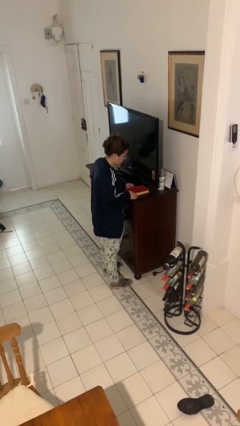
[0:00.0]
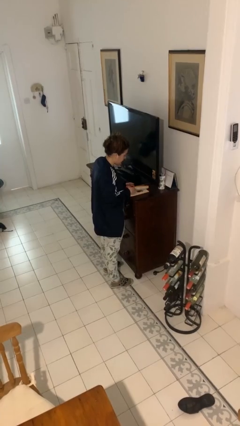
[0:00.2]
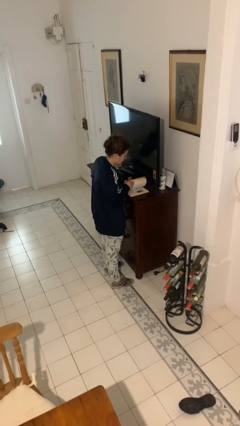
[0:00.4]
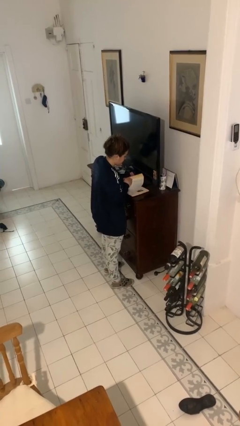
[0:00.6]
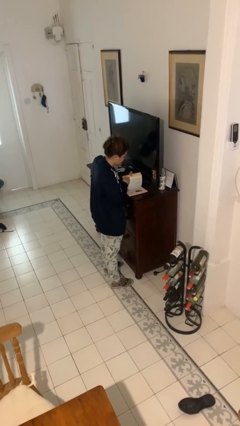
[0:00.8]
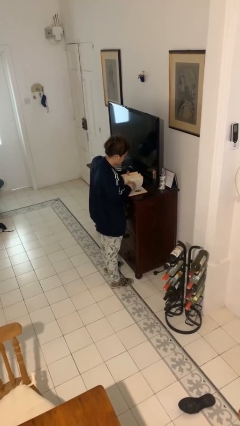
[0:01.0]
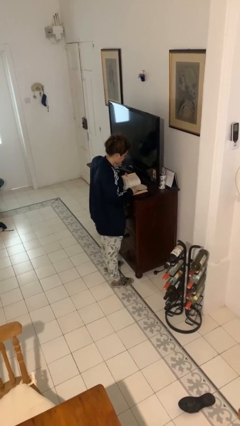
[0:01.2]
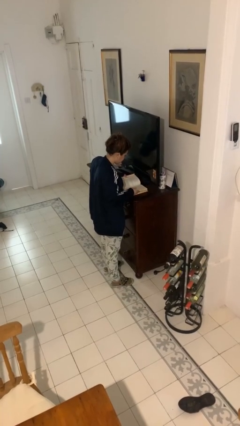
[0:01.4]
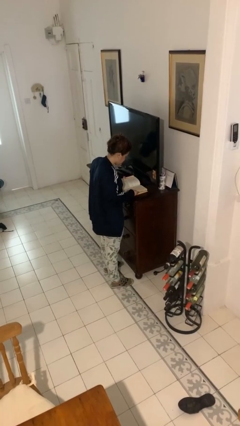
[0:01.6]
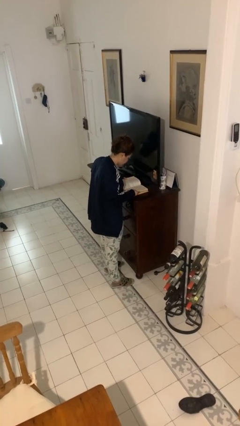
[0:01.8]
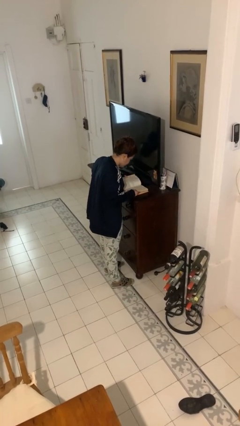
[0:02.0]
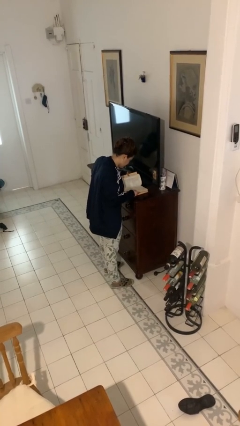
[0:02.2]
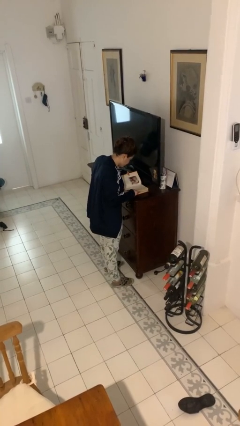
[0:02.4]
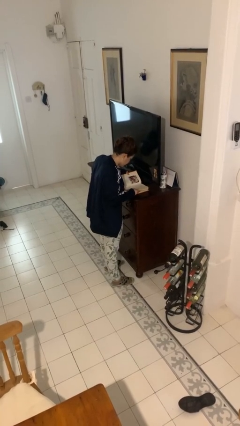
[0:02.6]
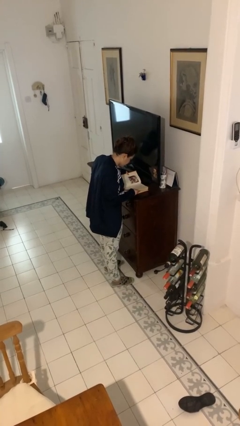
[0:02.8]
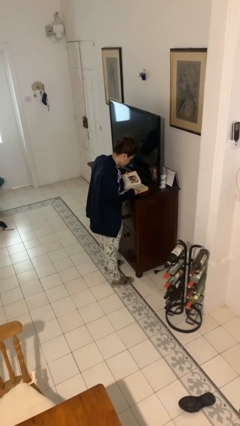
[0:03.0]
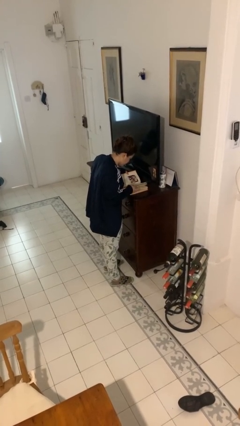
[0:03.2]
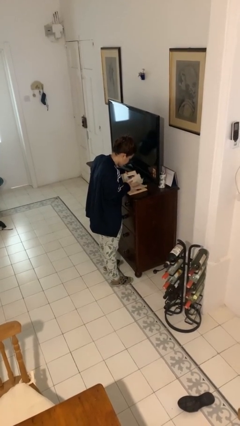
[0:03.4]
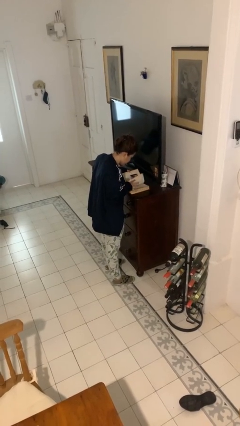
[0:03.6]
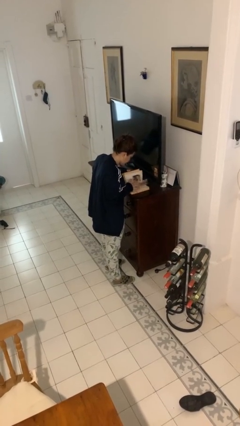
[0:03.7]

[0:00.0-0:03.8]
person reads book

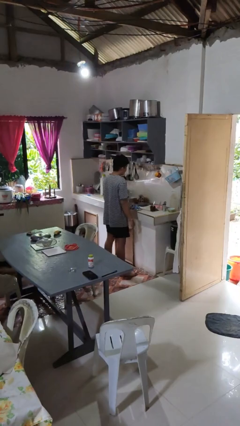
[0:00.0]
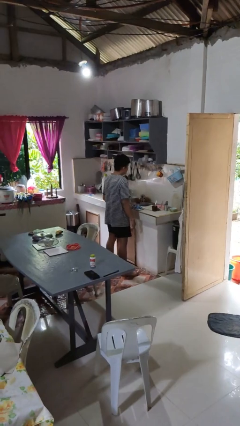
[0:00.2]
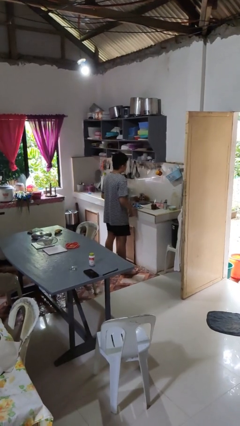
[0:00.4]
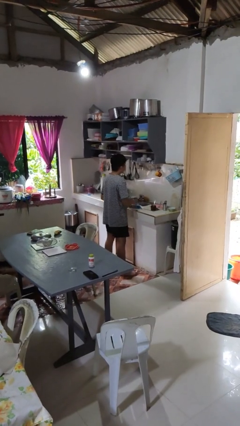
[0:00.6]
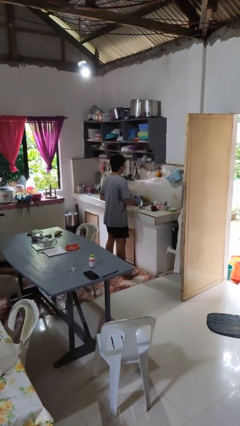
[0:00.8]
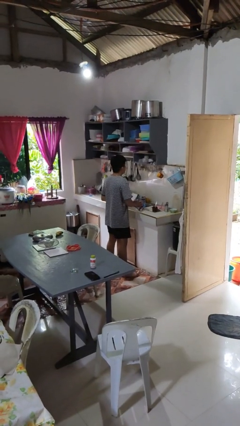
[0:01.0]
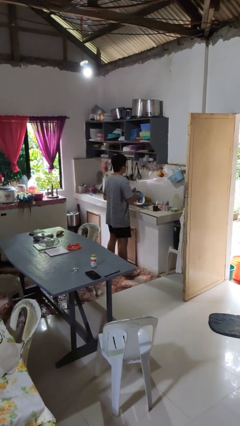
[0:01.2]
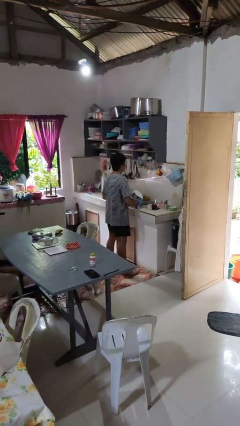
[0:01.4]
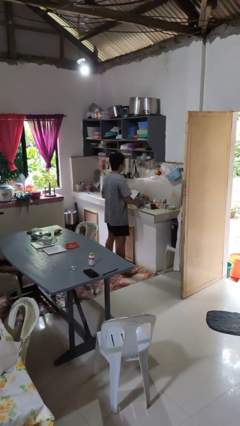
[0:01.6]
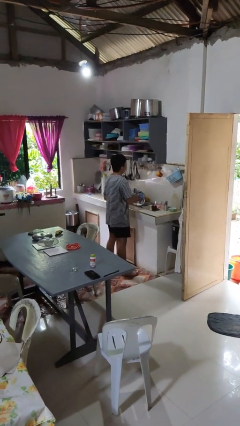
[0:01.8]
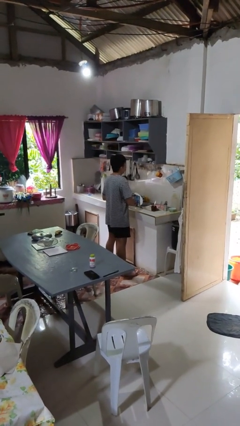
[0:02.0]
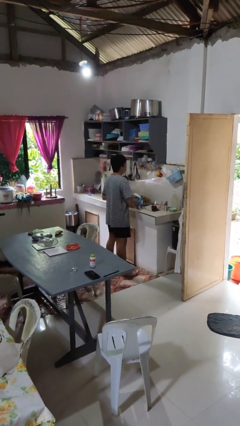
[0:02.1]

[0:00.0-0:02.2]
person dries dish

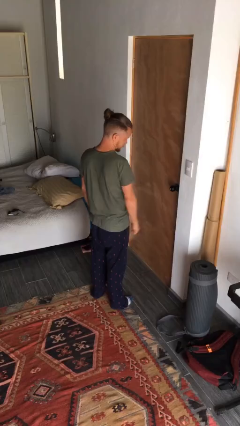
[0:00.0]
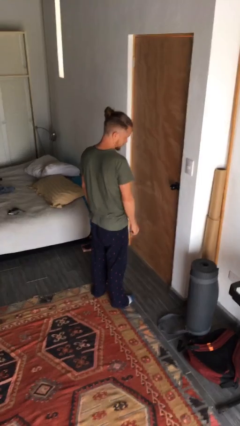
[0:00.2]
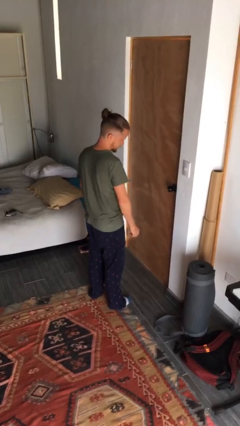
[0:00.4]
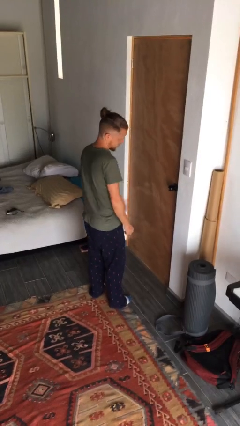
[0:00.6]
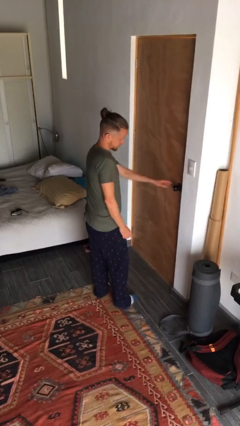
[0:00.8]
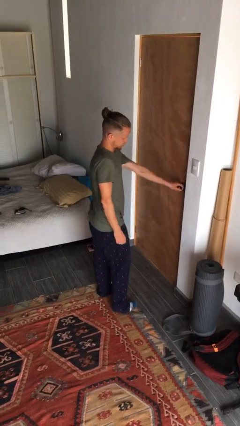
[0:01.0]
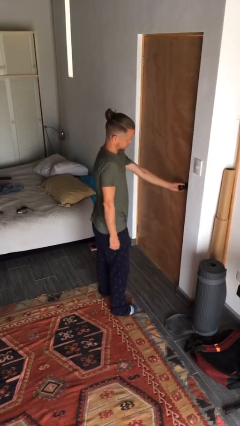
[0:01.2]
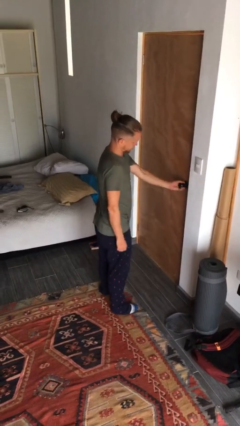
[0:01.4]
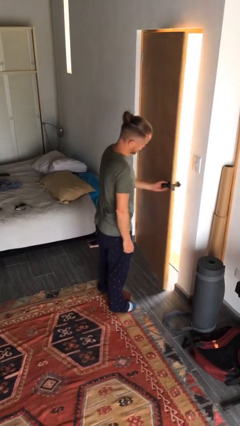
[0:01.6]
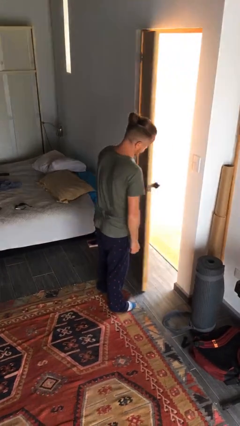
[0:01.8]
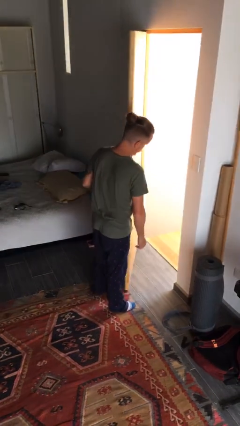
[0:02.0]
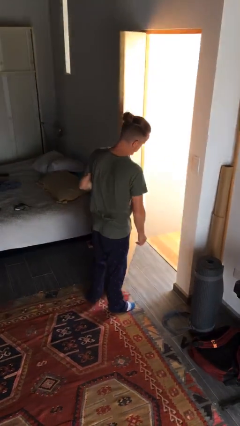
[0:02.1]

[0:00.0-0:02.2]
person opens facility door

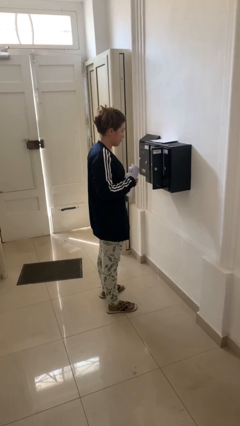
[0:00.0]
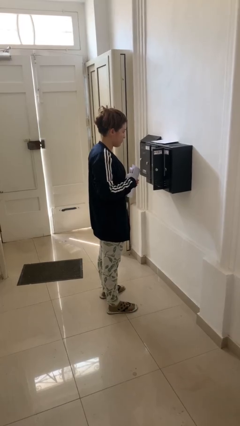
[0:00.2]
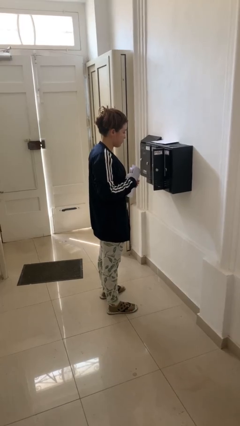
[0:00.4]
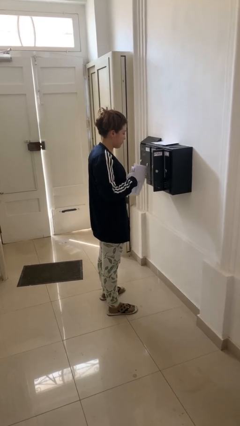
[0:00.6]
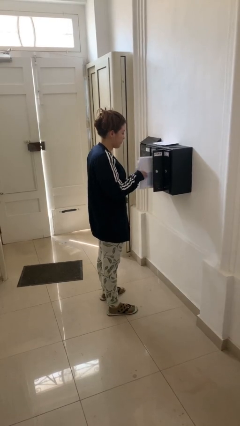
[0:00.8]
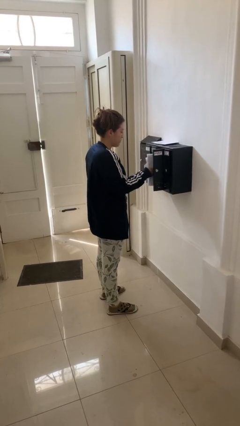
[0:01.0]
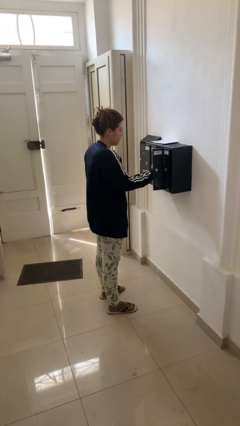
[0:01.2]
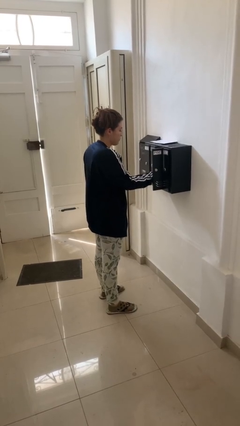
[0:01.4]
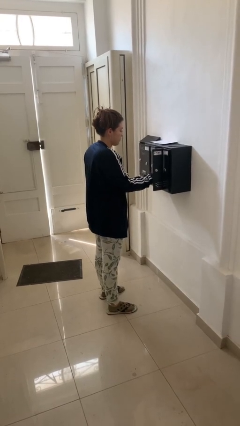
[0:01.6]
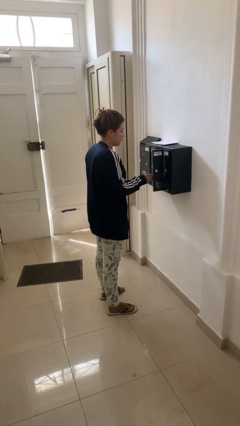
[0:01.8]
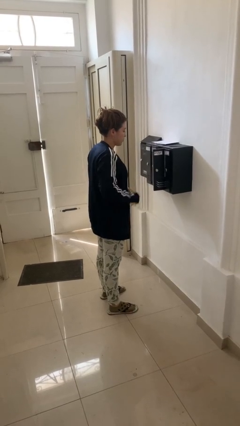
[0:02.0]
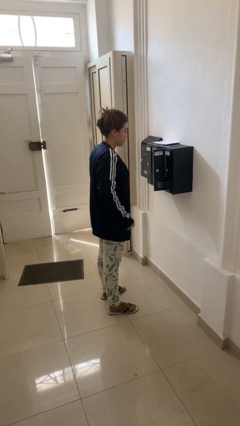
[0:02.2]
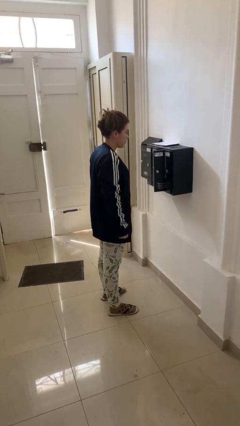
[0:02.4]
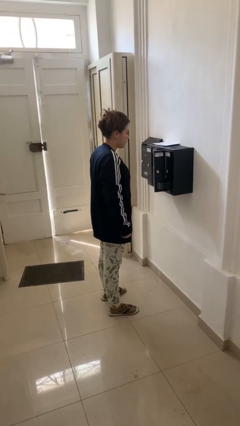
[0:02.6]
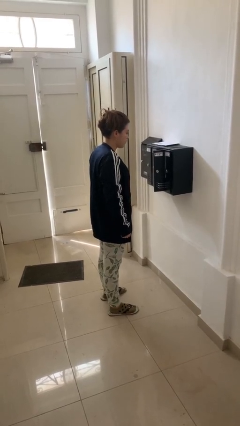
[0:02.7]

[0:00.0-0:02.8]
person puts letters in mailbox

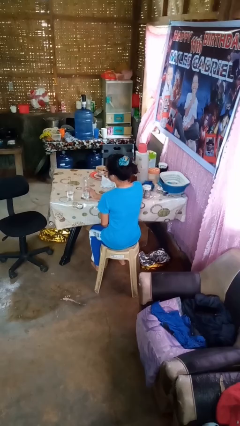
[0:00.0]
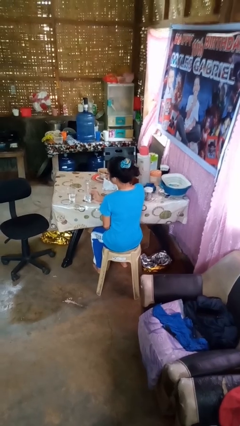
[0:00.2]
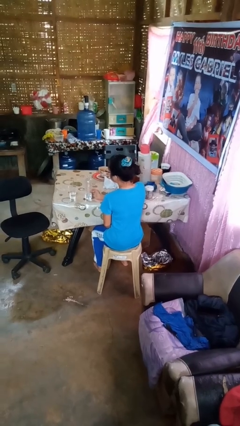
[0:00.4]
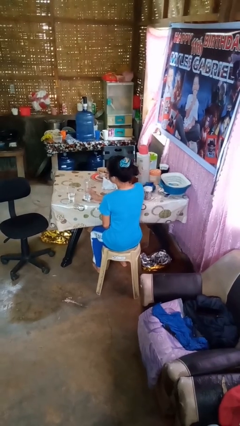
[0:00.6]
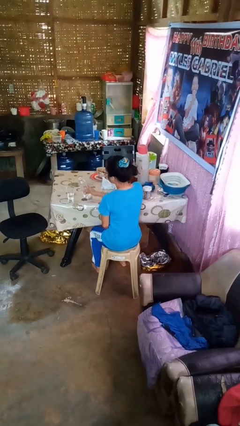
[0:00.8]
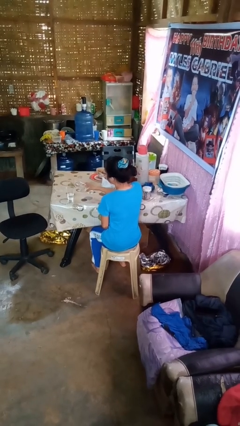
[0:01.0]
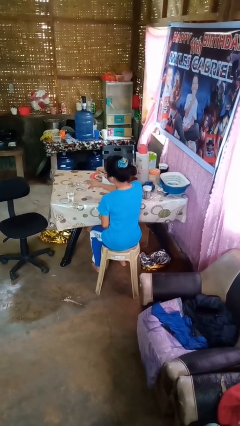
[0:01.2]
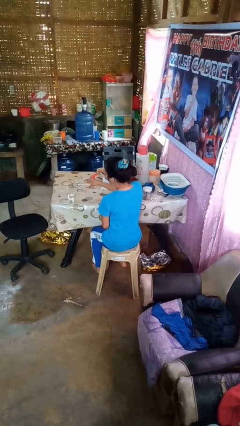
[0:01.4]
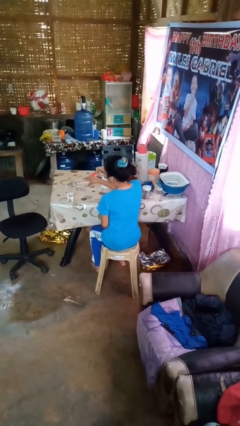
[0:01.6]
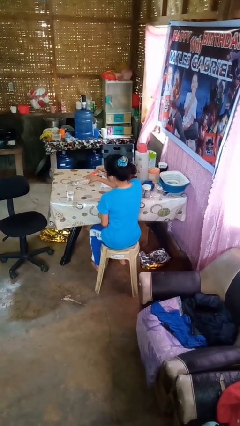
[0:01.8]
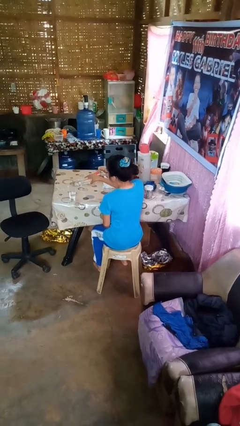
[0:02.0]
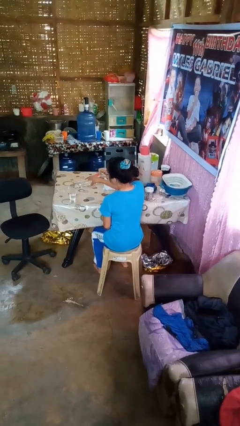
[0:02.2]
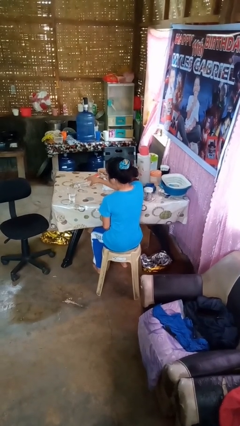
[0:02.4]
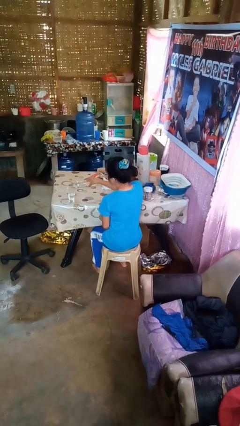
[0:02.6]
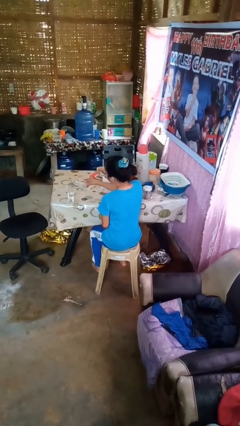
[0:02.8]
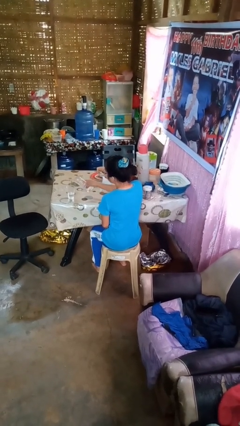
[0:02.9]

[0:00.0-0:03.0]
person pours liquid into cup

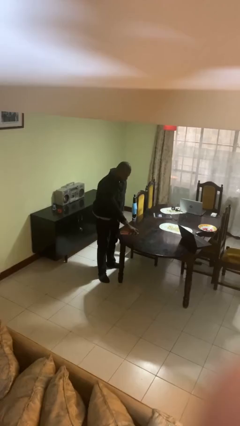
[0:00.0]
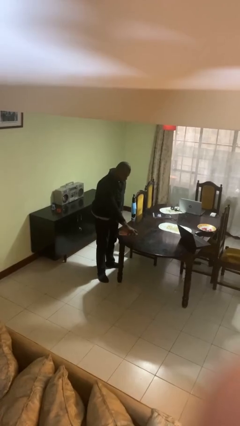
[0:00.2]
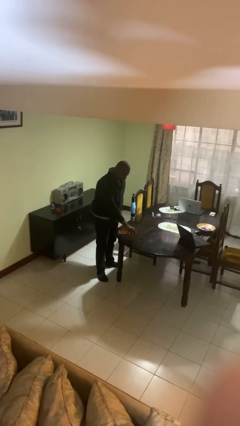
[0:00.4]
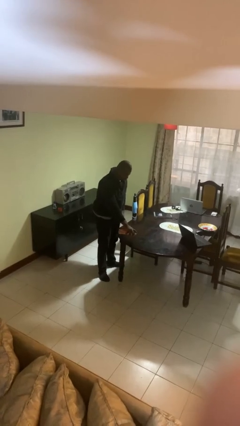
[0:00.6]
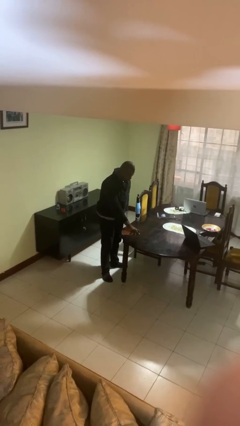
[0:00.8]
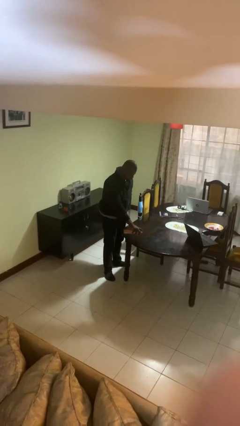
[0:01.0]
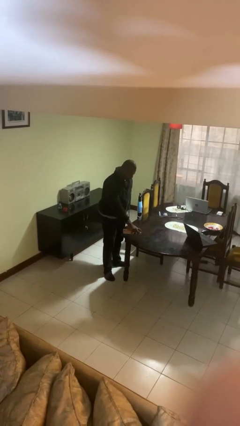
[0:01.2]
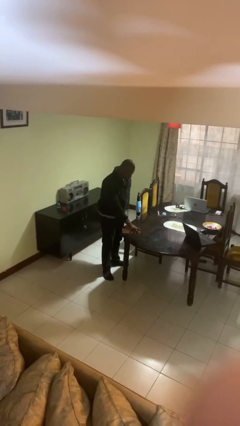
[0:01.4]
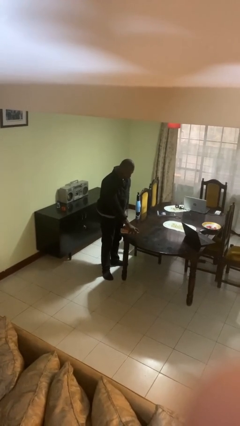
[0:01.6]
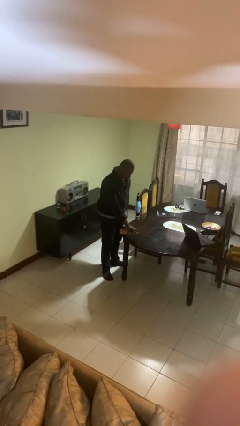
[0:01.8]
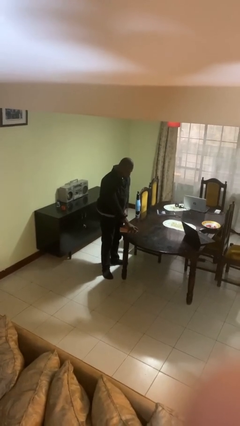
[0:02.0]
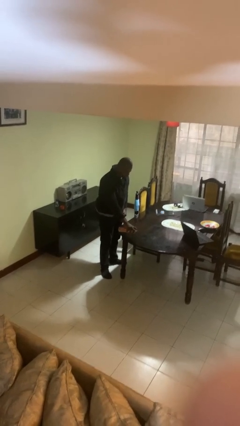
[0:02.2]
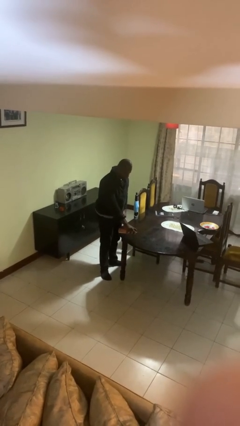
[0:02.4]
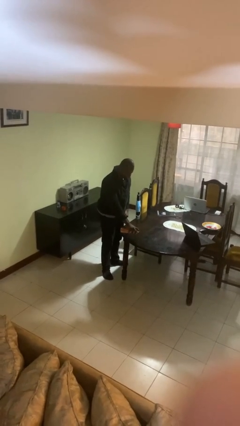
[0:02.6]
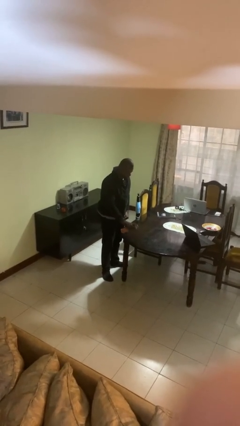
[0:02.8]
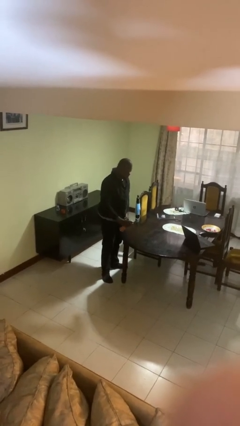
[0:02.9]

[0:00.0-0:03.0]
person sprays from bottle

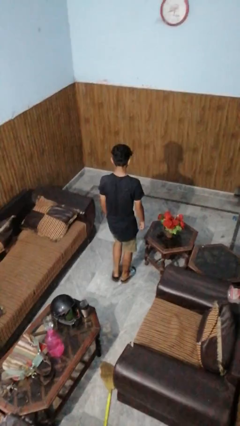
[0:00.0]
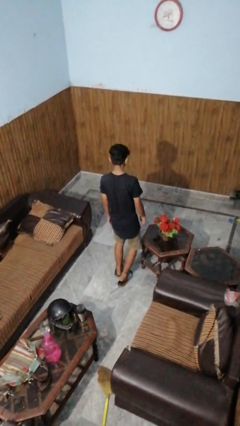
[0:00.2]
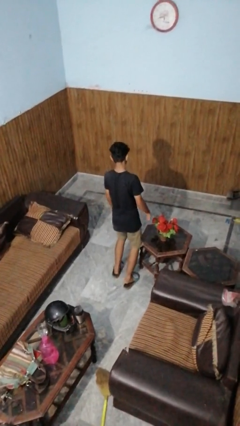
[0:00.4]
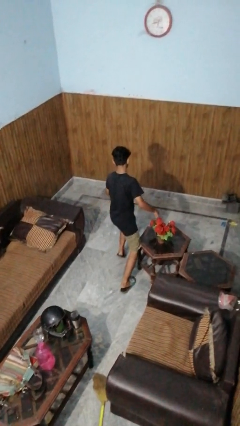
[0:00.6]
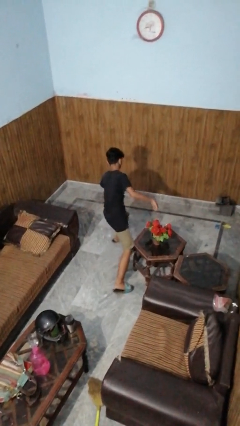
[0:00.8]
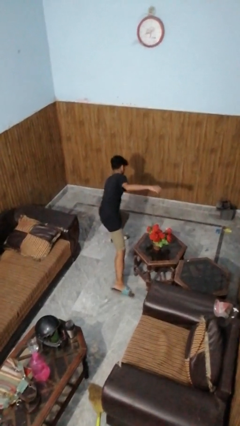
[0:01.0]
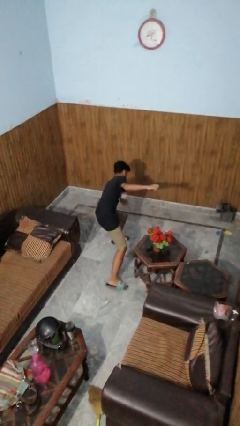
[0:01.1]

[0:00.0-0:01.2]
person trips on object on floor
